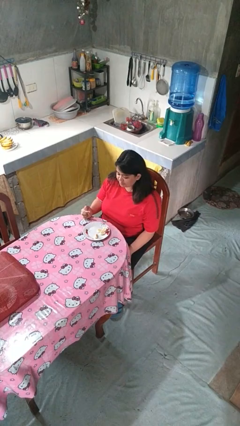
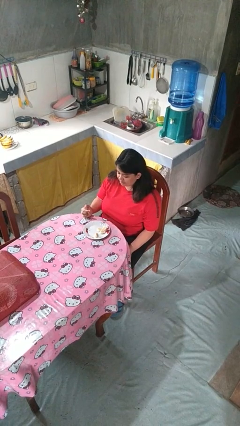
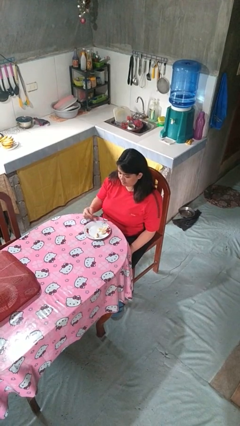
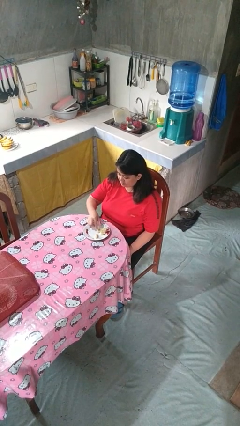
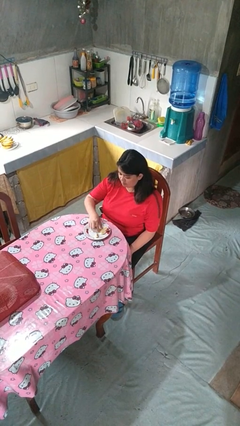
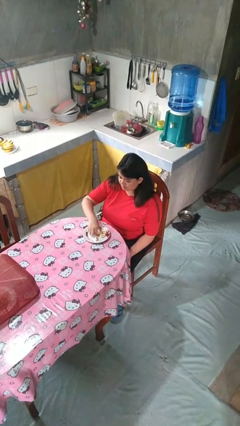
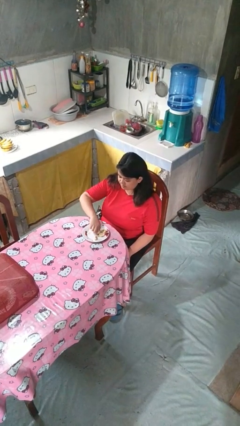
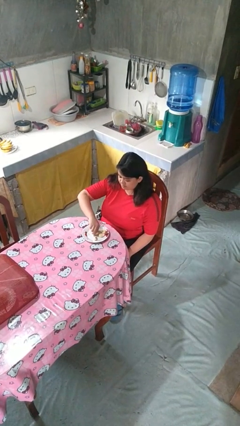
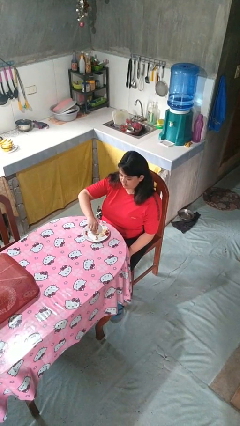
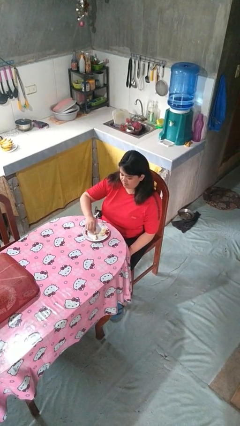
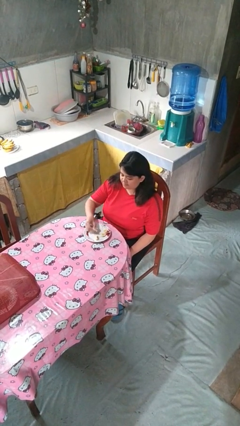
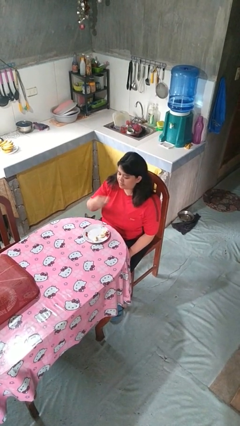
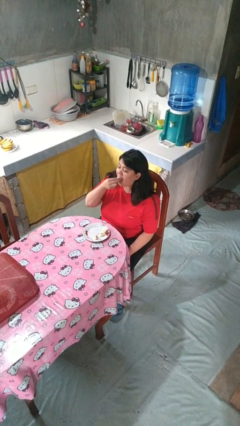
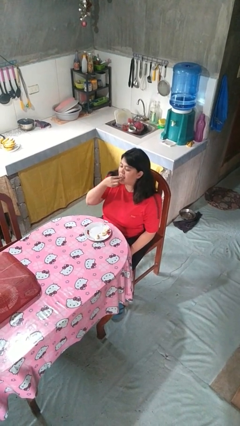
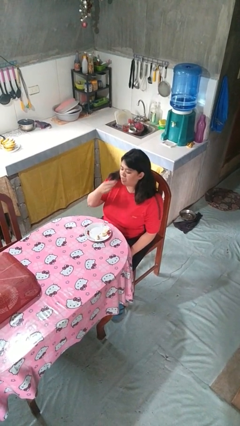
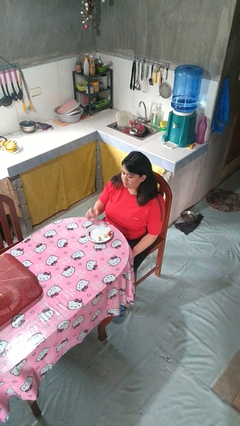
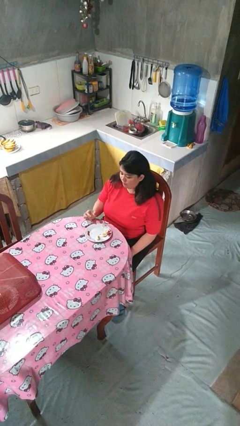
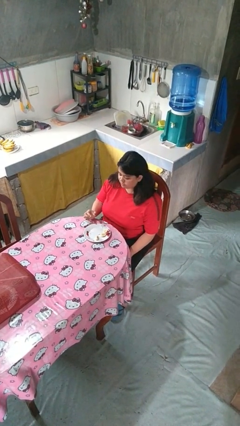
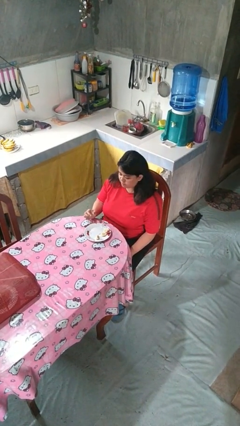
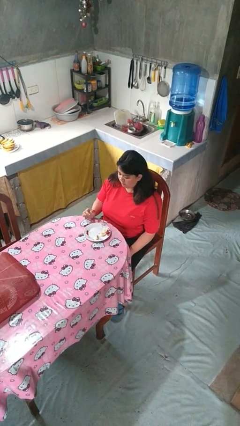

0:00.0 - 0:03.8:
person eats with hands

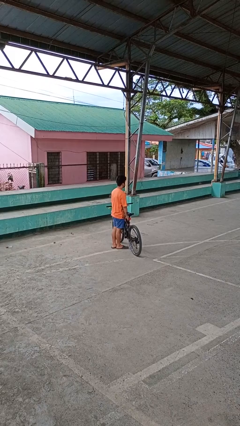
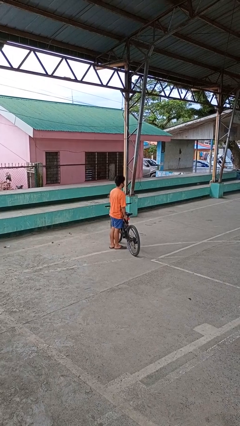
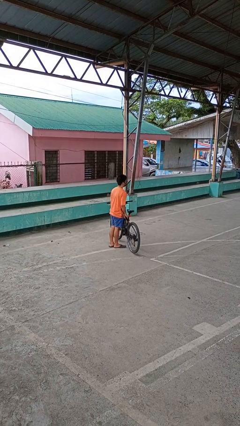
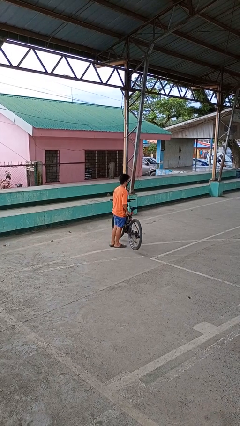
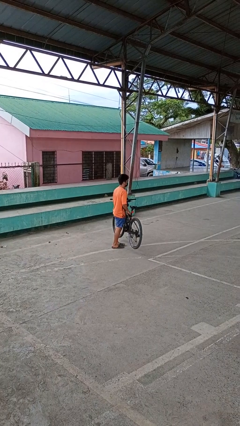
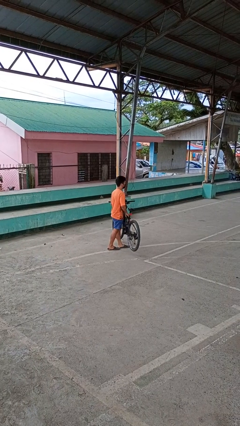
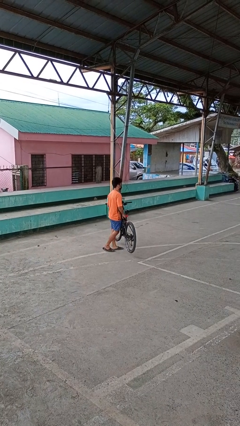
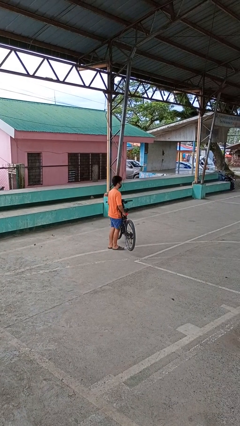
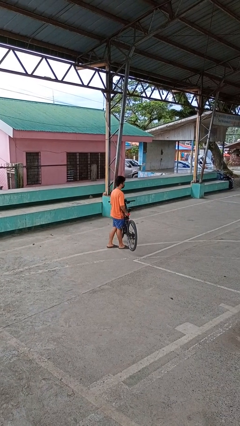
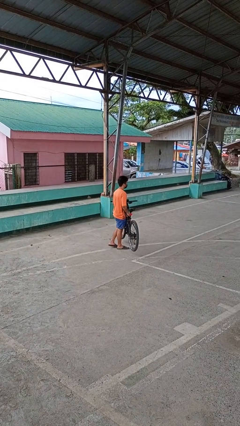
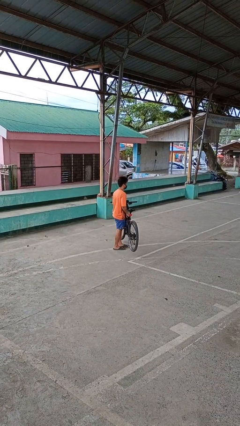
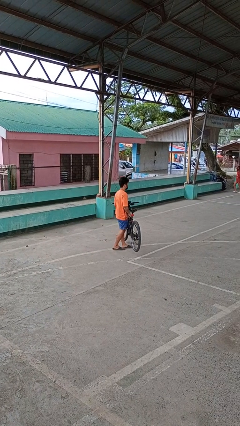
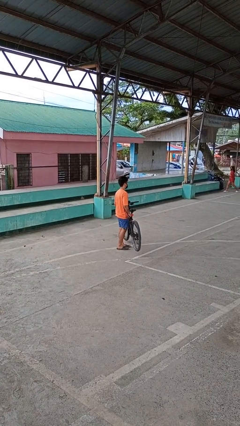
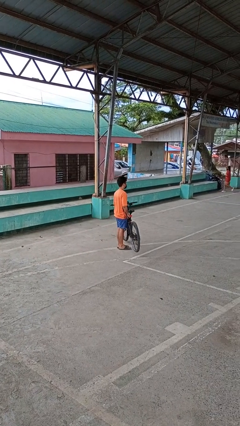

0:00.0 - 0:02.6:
person carries bicycle

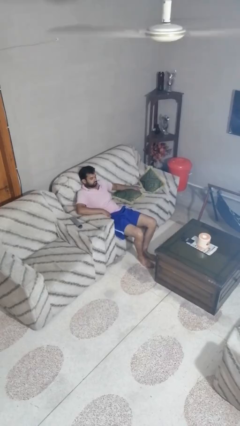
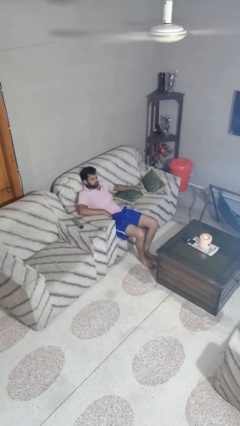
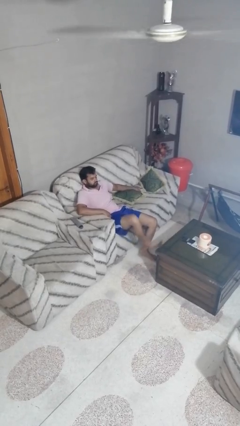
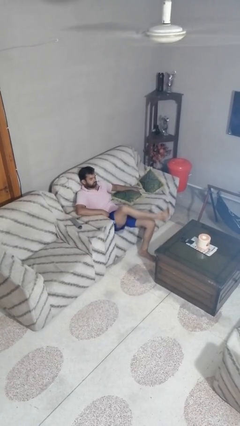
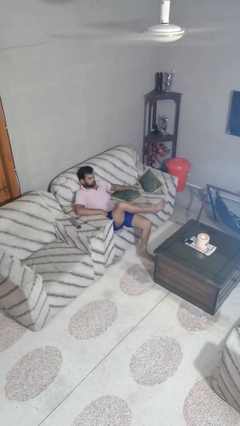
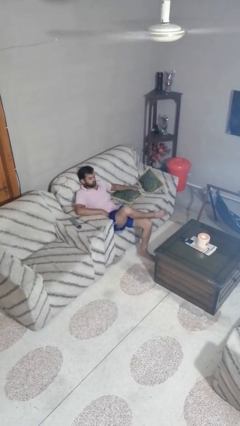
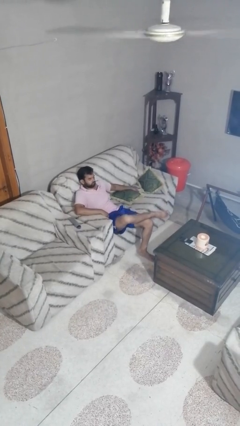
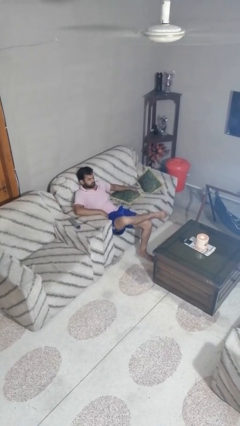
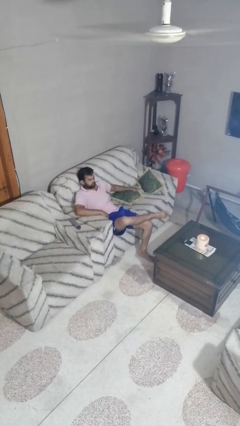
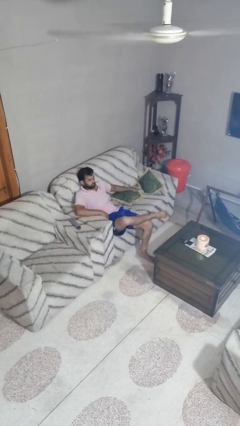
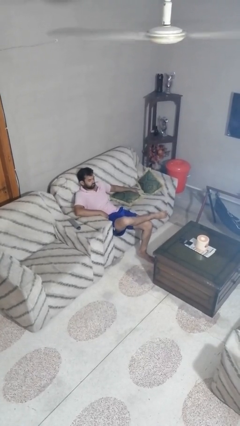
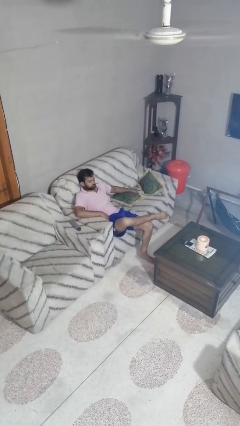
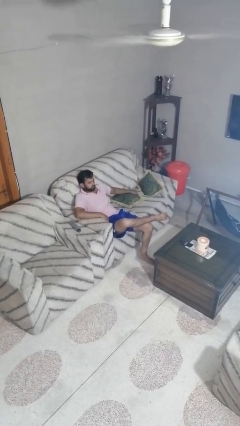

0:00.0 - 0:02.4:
person crosses legs

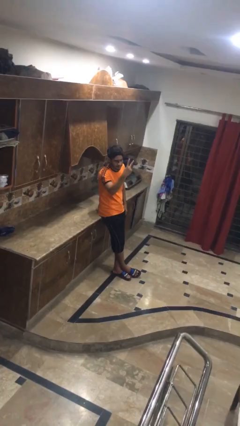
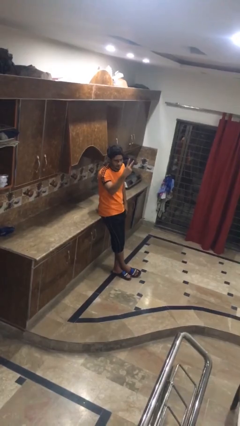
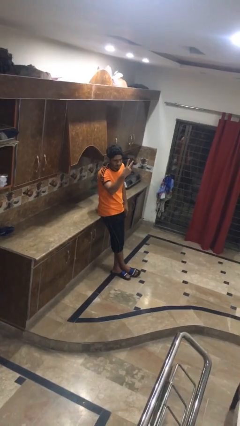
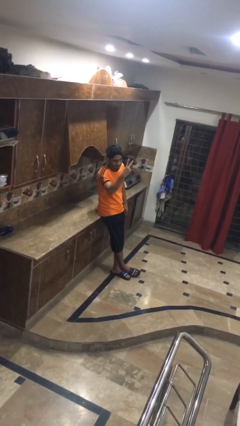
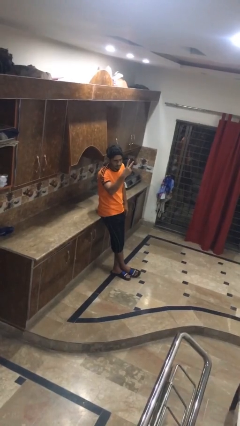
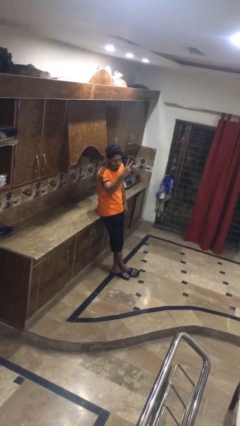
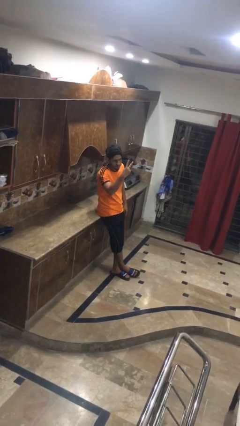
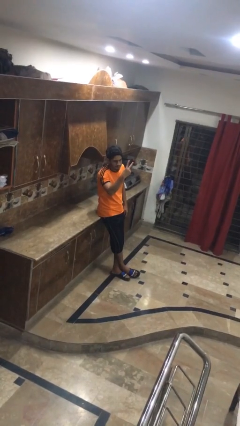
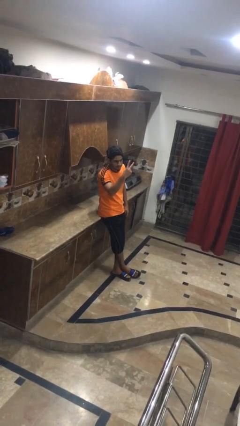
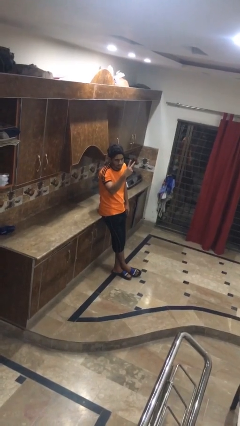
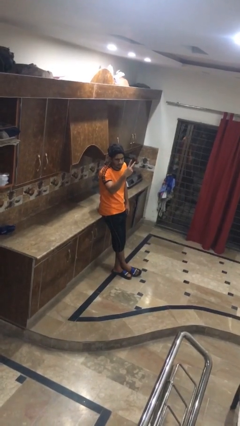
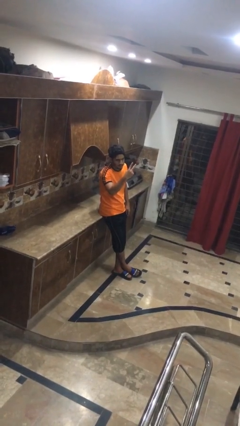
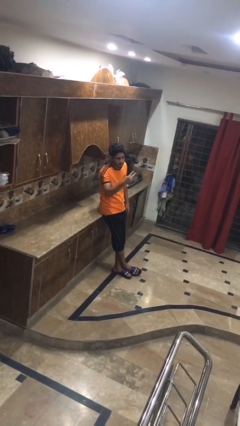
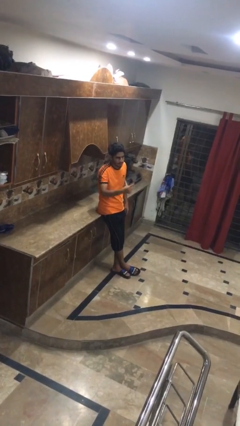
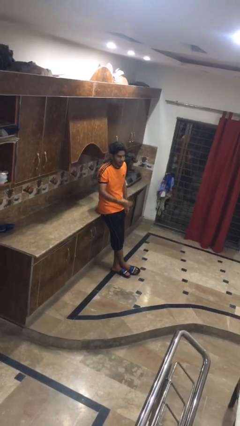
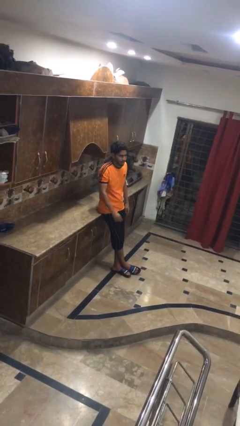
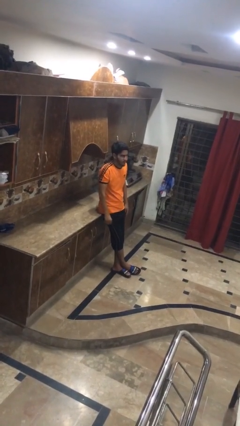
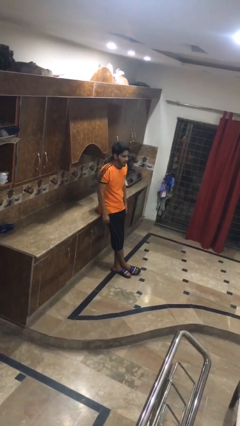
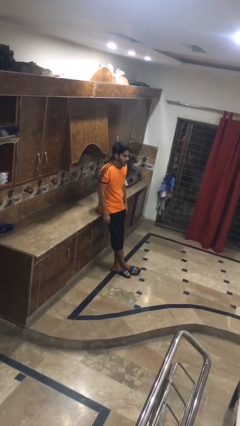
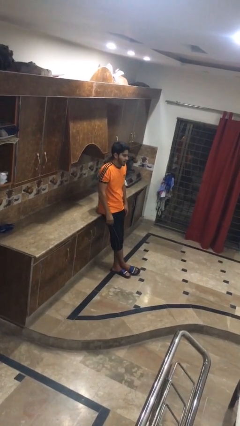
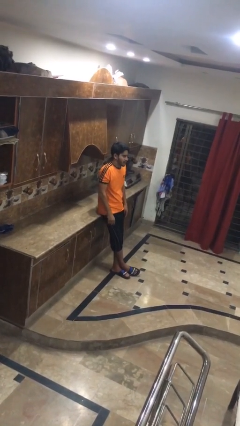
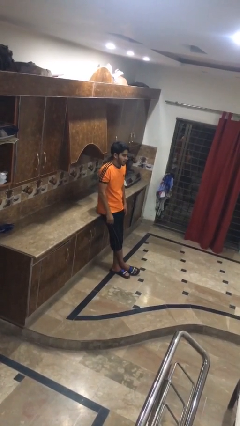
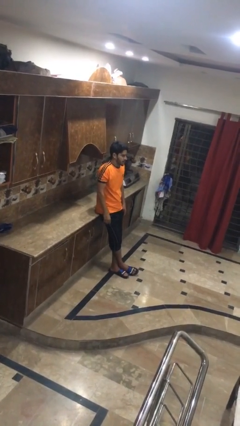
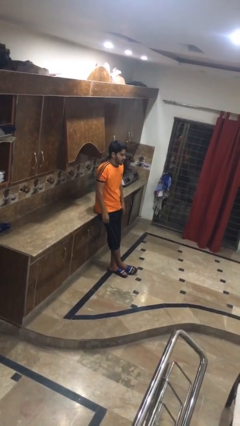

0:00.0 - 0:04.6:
person gestures peace

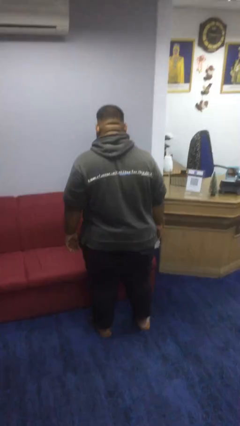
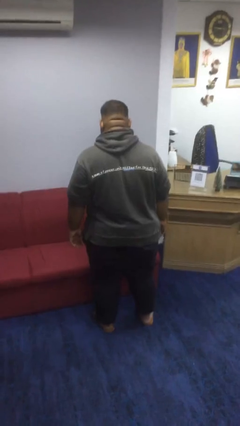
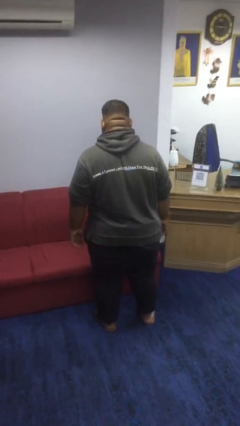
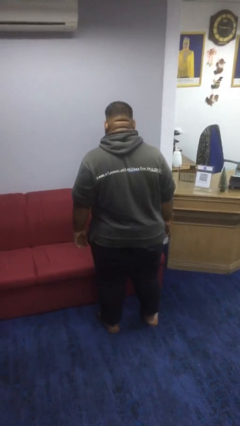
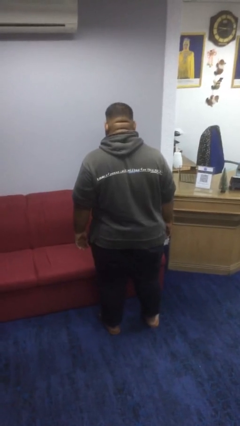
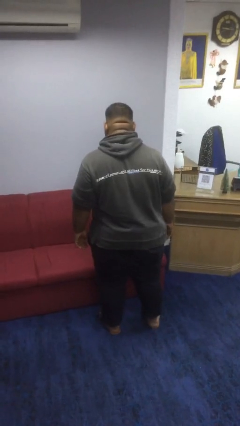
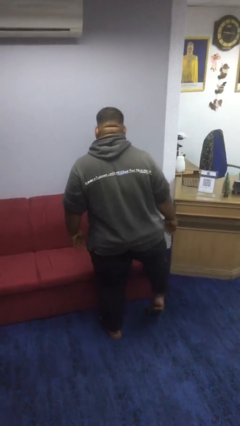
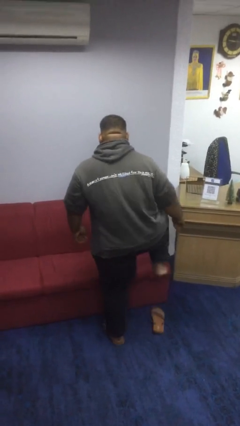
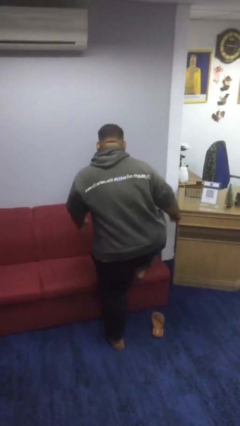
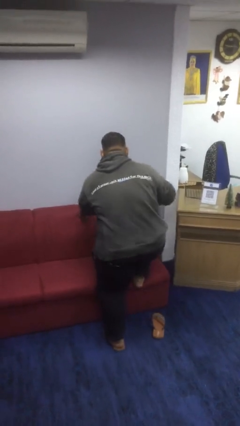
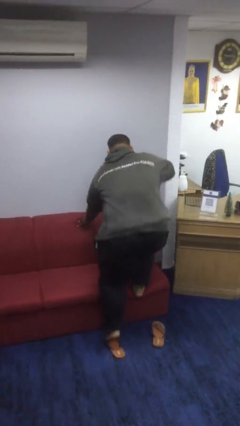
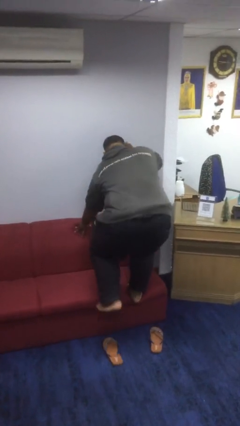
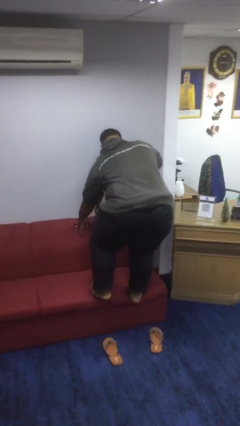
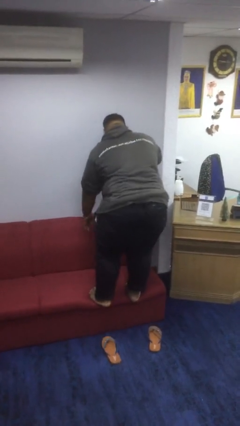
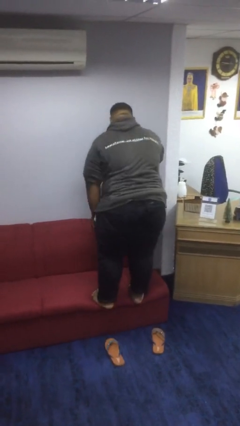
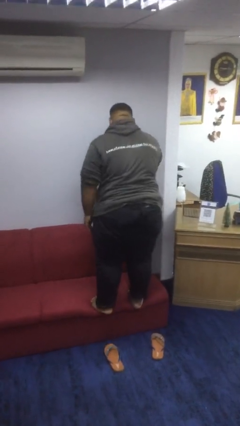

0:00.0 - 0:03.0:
person climbs on couch

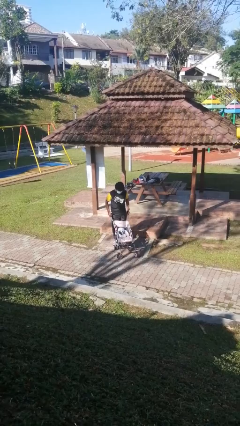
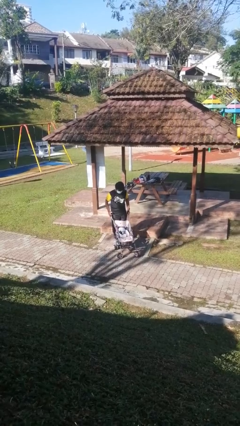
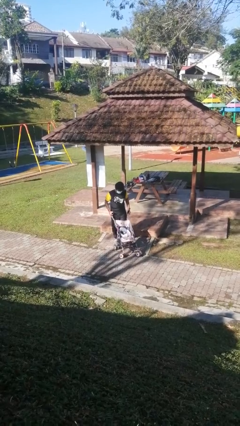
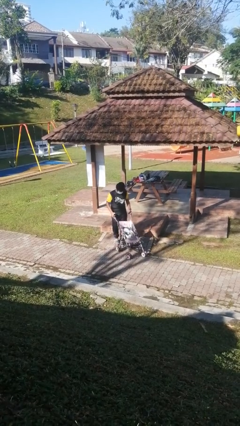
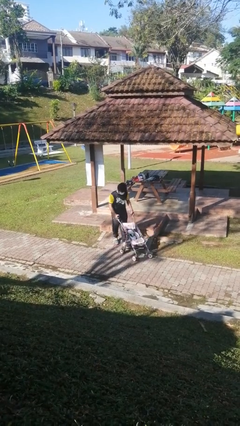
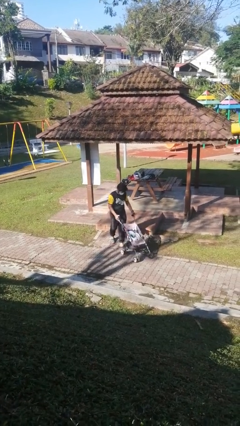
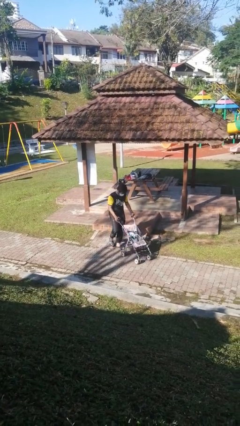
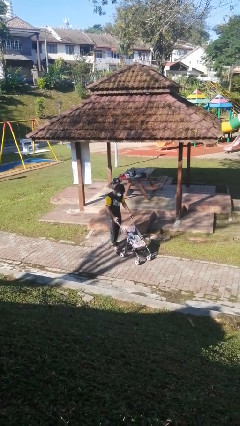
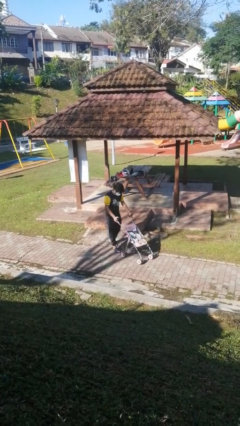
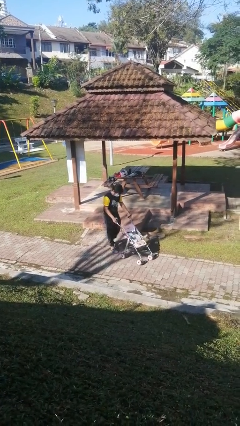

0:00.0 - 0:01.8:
person pushes wheeled cart
